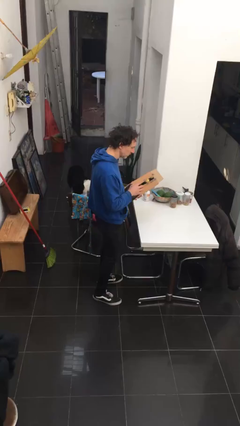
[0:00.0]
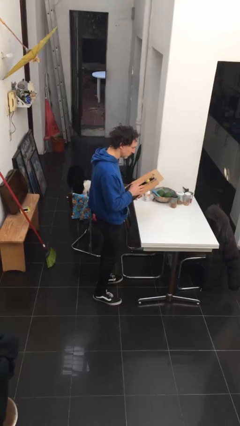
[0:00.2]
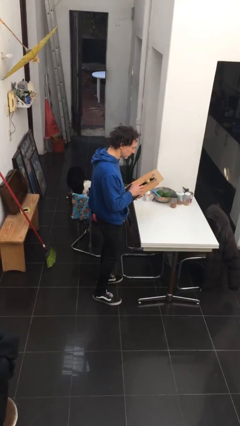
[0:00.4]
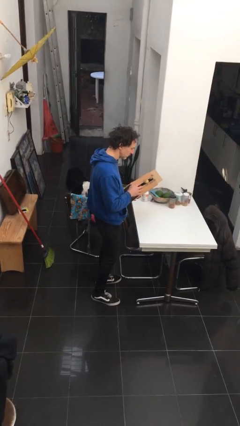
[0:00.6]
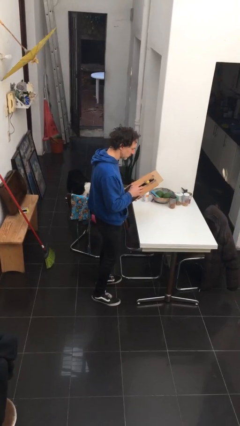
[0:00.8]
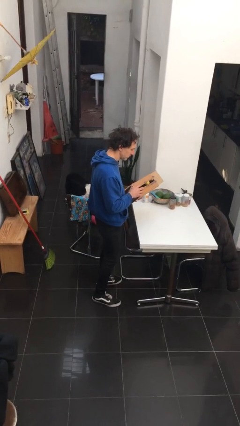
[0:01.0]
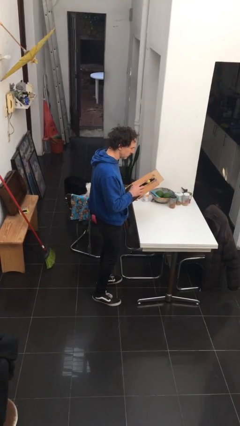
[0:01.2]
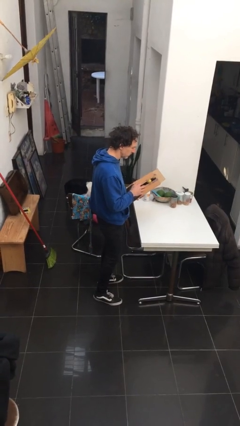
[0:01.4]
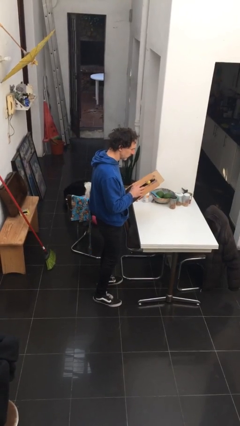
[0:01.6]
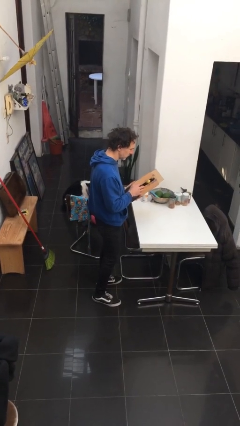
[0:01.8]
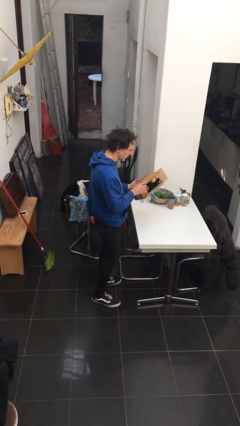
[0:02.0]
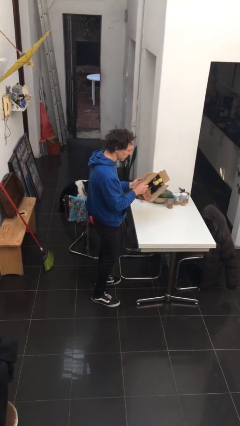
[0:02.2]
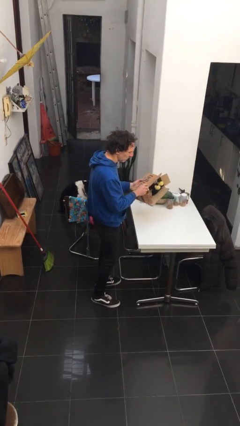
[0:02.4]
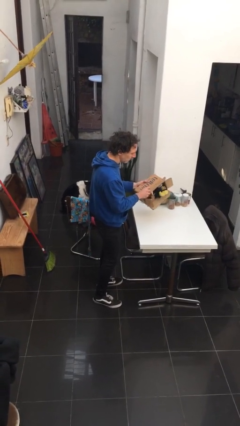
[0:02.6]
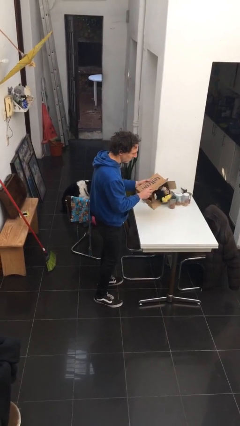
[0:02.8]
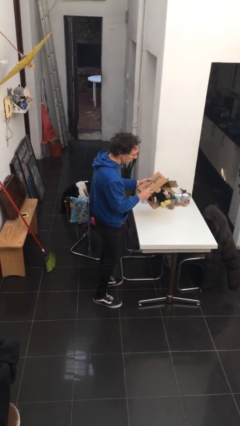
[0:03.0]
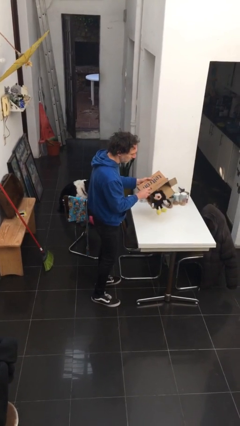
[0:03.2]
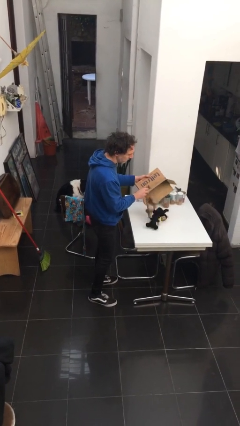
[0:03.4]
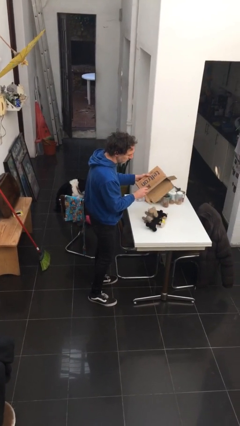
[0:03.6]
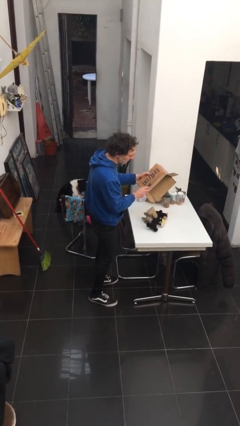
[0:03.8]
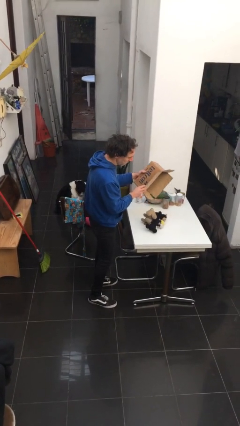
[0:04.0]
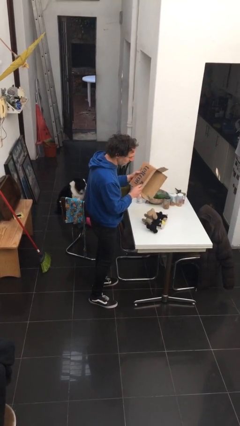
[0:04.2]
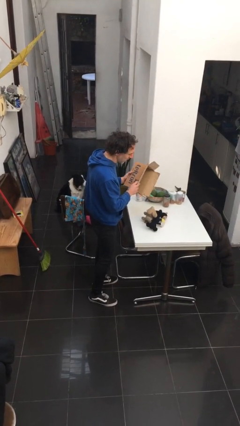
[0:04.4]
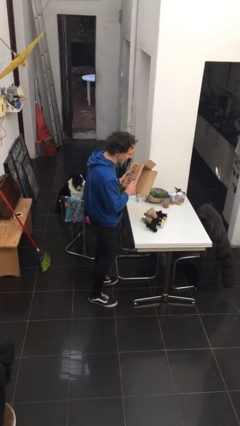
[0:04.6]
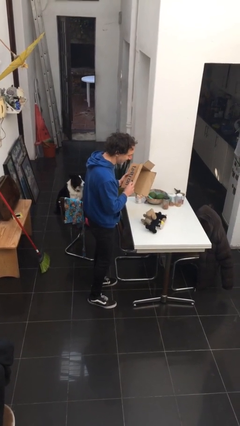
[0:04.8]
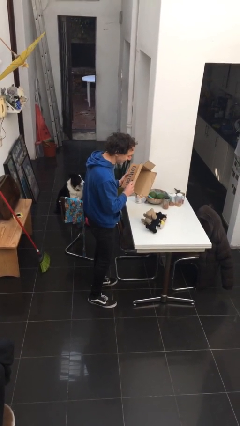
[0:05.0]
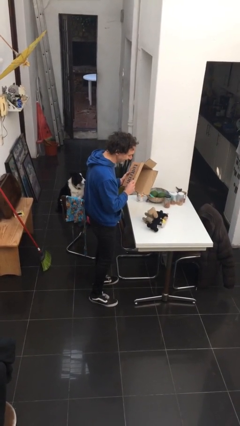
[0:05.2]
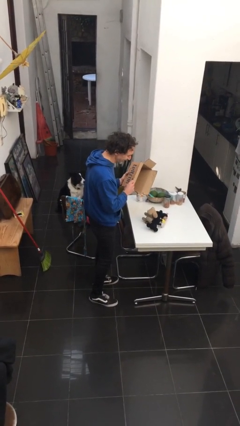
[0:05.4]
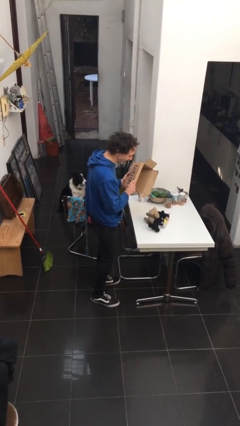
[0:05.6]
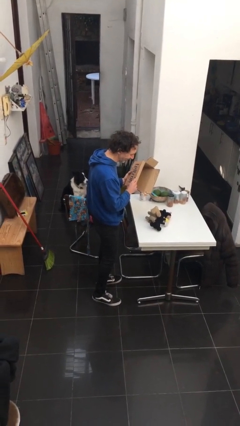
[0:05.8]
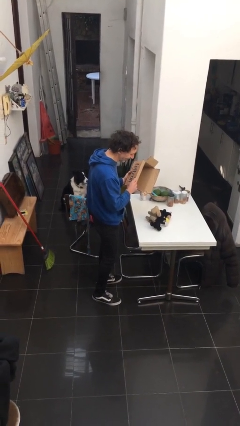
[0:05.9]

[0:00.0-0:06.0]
person unloads box onto table

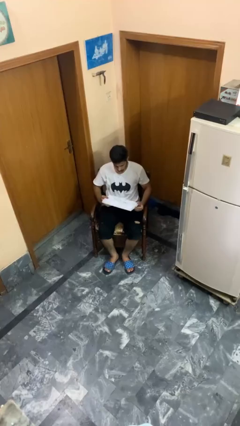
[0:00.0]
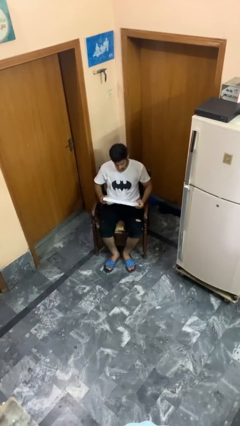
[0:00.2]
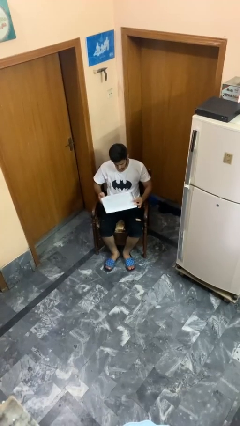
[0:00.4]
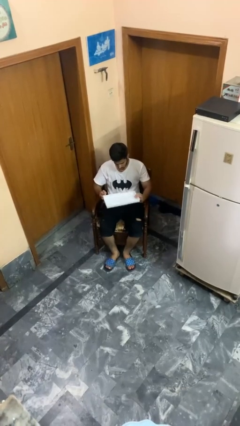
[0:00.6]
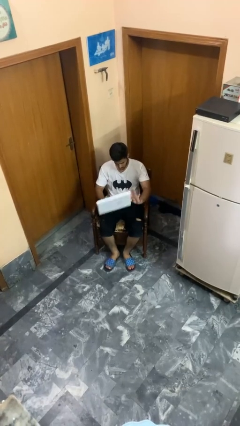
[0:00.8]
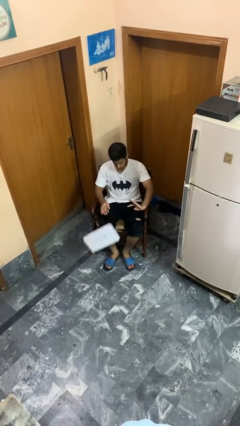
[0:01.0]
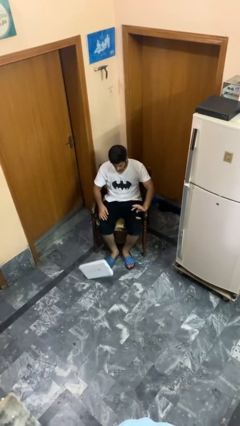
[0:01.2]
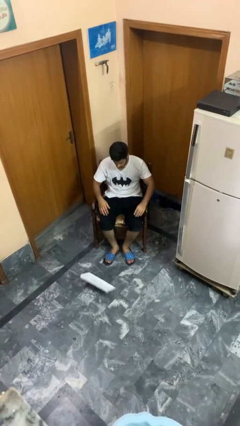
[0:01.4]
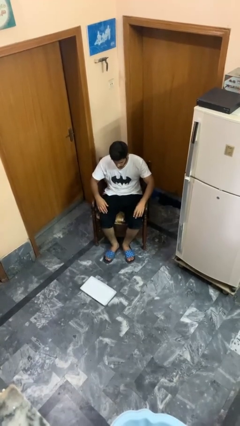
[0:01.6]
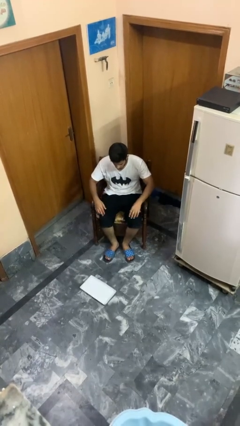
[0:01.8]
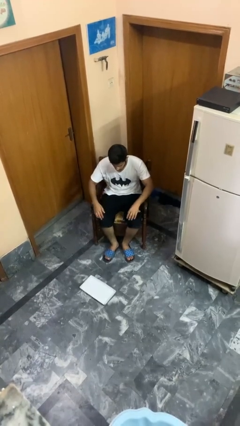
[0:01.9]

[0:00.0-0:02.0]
person drops object

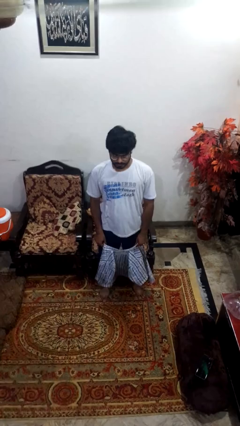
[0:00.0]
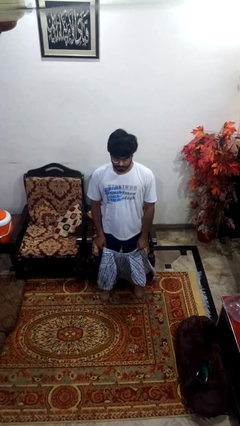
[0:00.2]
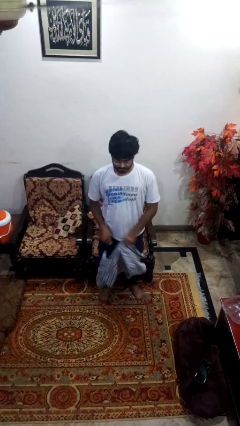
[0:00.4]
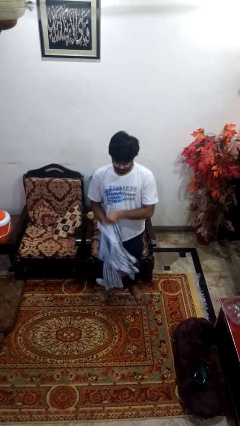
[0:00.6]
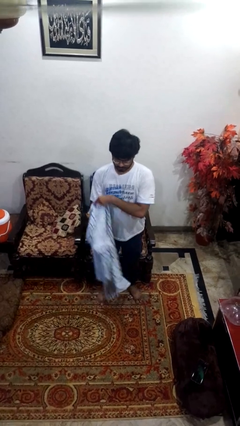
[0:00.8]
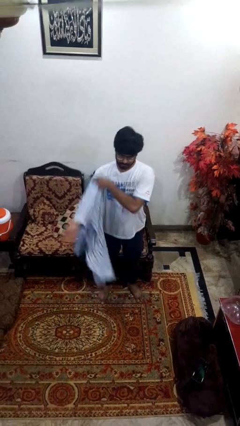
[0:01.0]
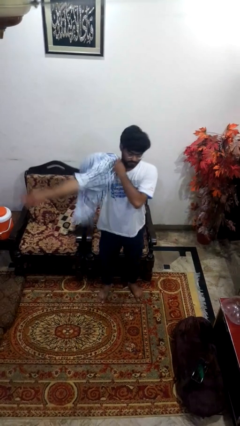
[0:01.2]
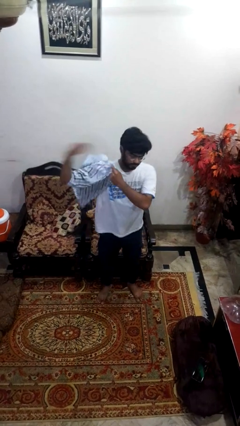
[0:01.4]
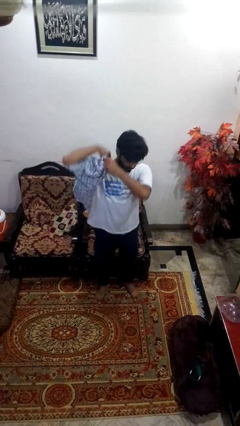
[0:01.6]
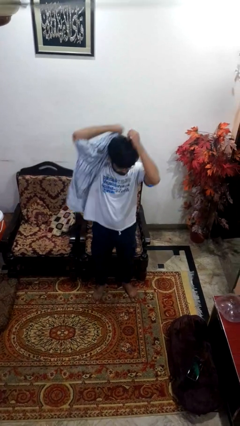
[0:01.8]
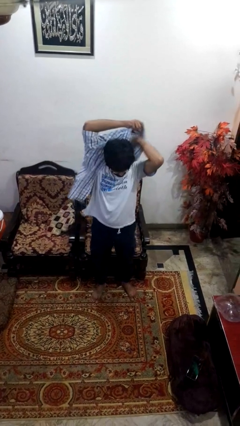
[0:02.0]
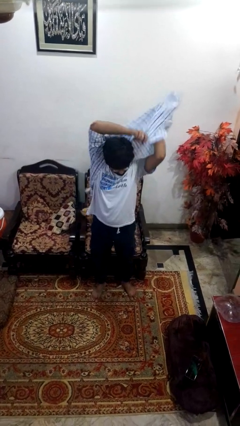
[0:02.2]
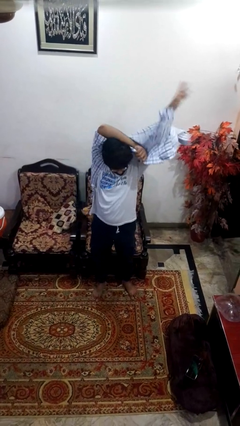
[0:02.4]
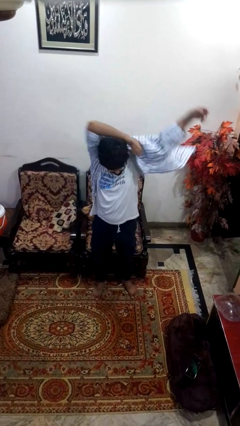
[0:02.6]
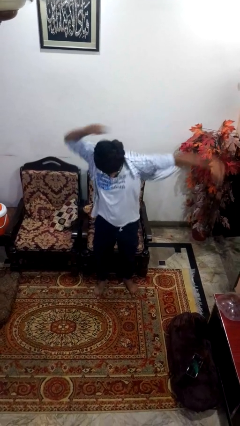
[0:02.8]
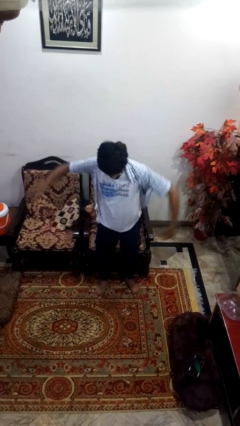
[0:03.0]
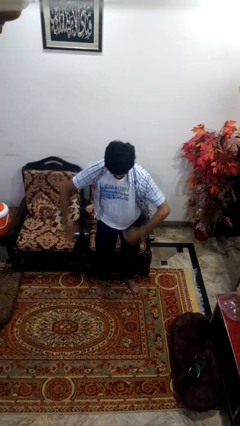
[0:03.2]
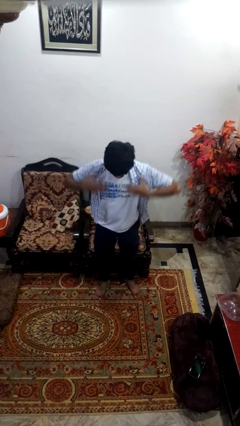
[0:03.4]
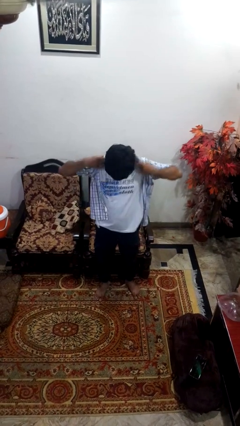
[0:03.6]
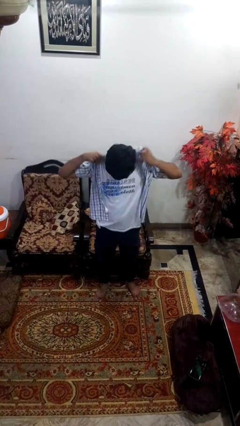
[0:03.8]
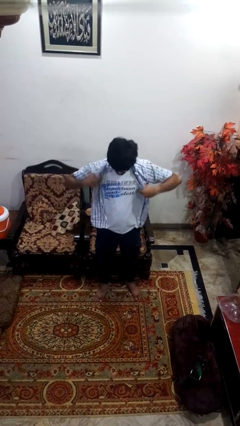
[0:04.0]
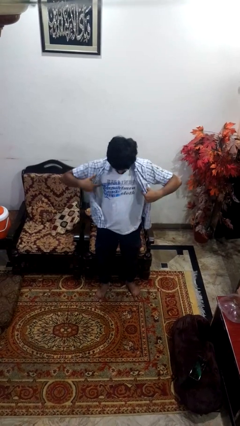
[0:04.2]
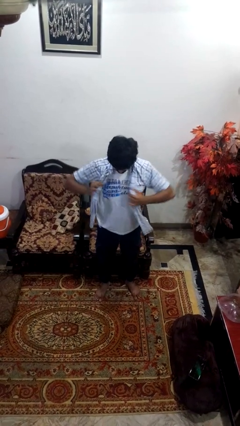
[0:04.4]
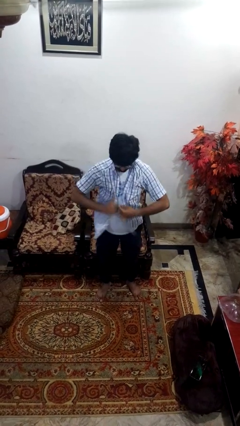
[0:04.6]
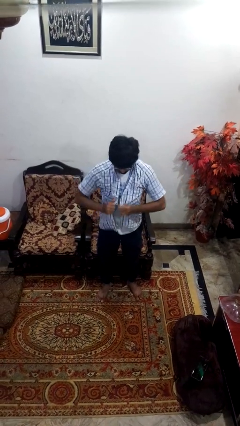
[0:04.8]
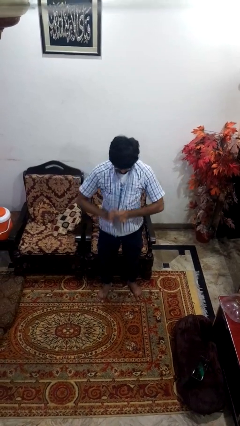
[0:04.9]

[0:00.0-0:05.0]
person puts on shirt

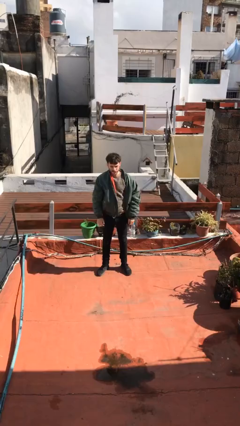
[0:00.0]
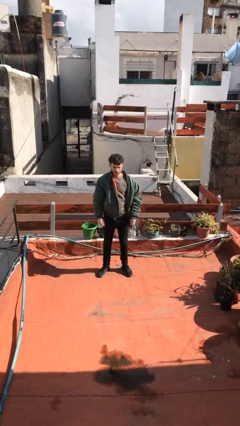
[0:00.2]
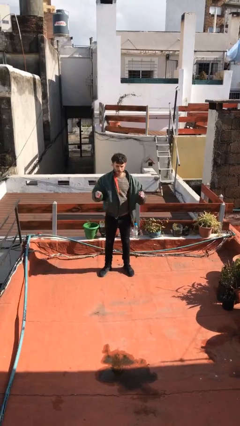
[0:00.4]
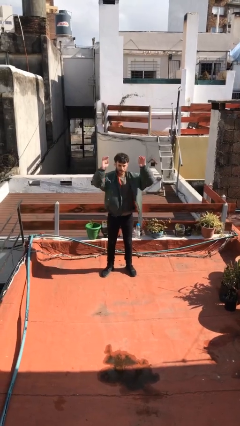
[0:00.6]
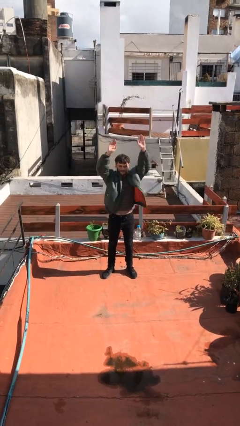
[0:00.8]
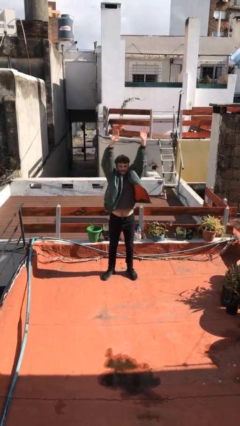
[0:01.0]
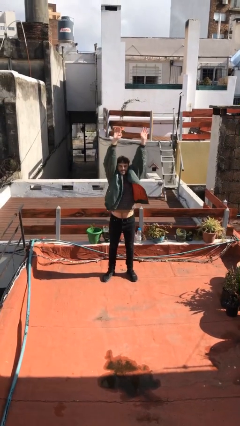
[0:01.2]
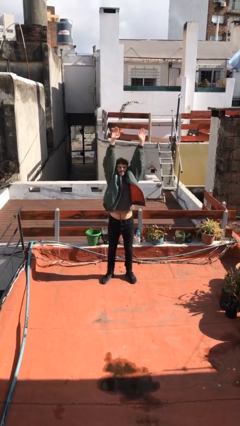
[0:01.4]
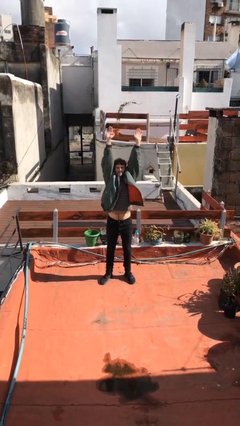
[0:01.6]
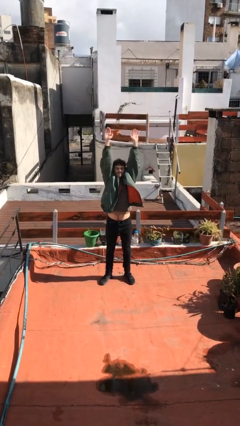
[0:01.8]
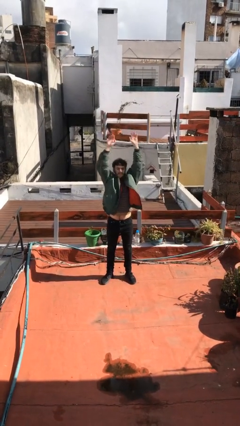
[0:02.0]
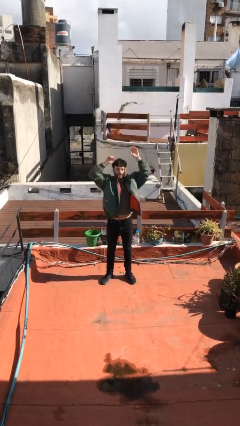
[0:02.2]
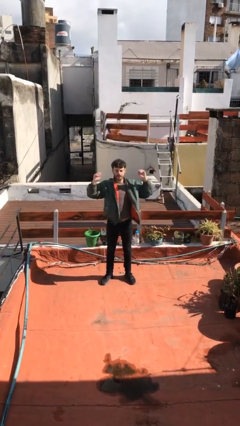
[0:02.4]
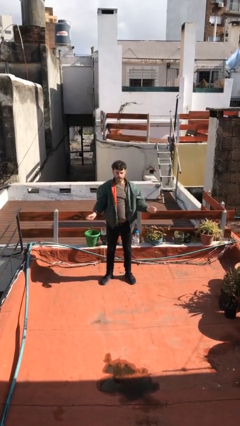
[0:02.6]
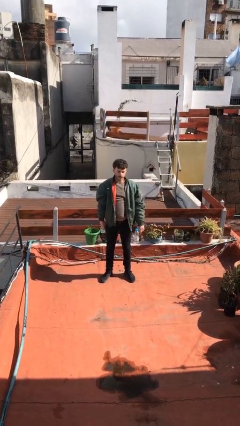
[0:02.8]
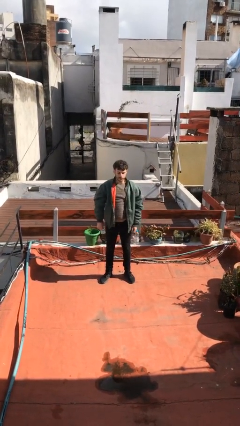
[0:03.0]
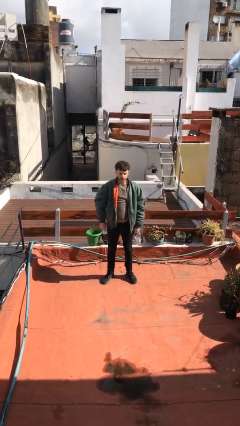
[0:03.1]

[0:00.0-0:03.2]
person stretches arms over head

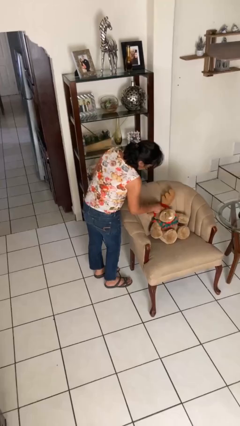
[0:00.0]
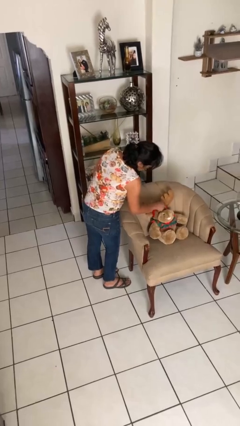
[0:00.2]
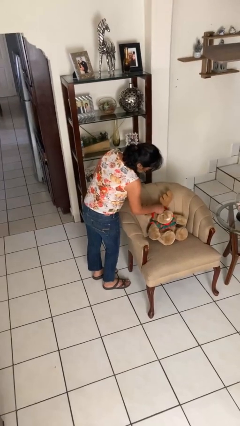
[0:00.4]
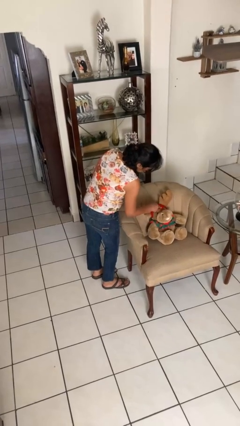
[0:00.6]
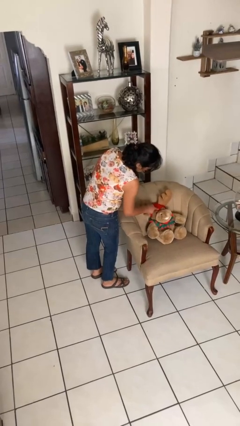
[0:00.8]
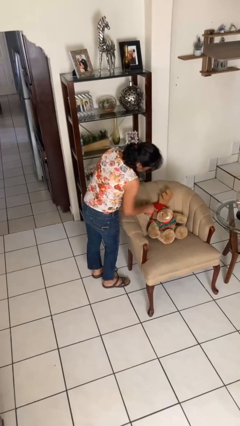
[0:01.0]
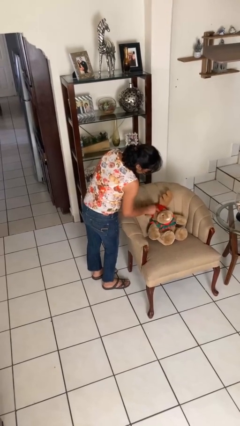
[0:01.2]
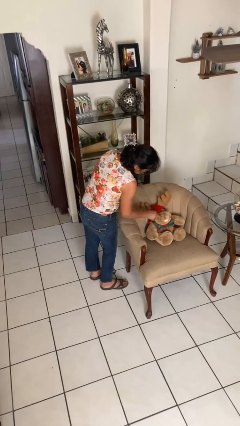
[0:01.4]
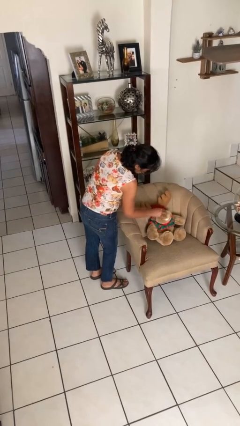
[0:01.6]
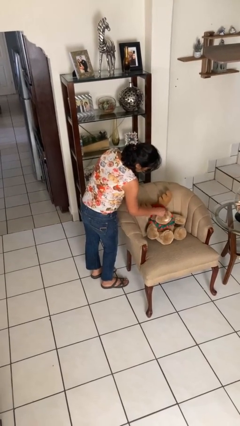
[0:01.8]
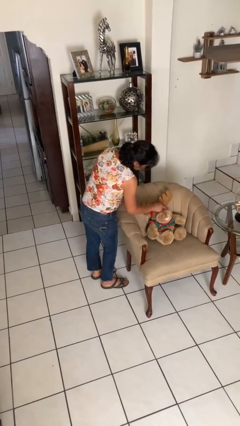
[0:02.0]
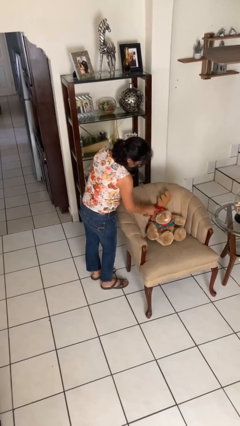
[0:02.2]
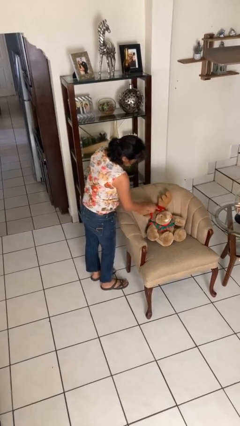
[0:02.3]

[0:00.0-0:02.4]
person taps object with finger
